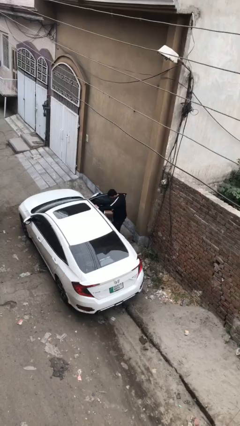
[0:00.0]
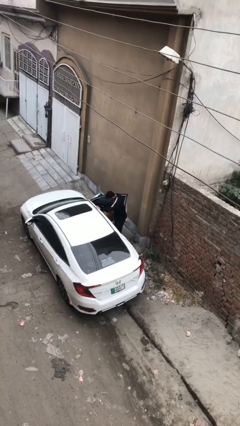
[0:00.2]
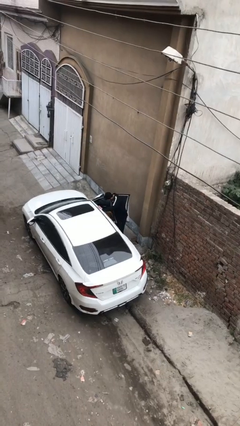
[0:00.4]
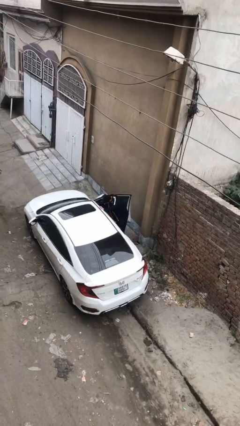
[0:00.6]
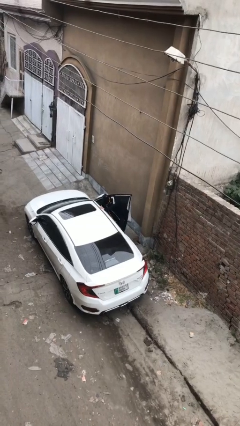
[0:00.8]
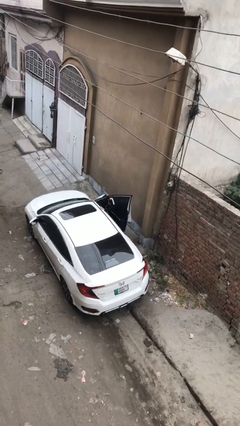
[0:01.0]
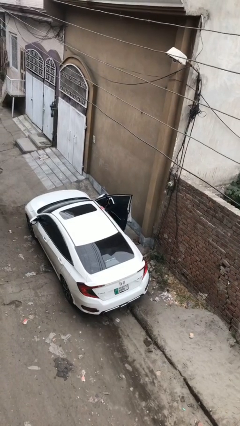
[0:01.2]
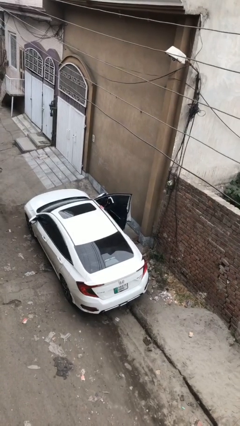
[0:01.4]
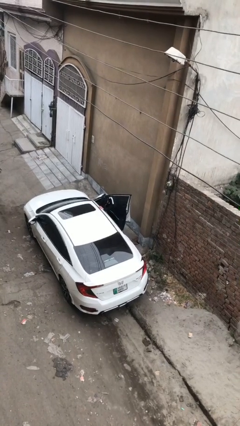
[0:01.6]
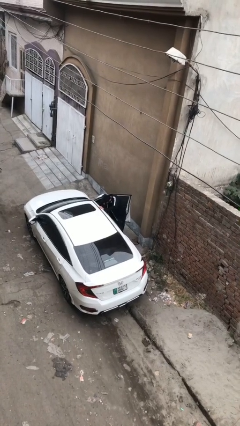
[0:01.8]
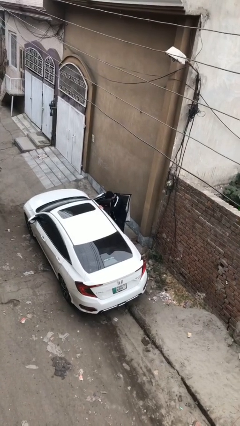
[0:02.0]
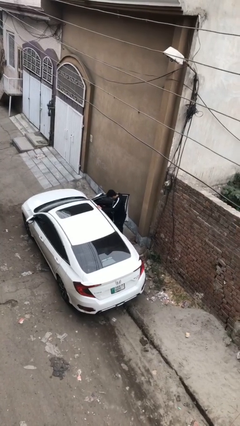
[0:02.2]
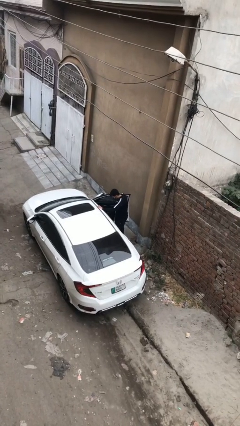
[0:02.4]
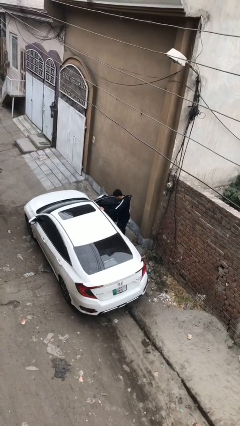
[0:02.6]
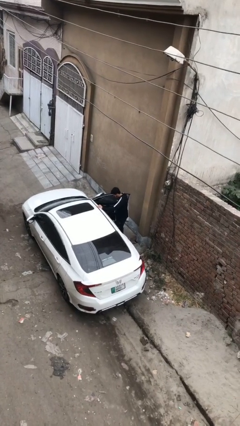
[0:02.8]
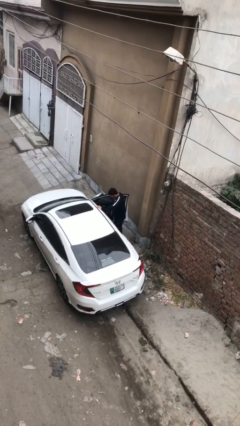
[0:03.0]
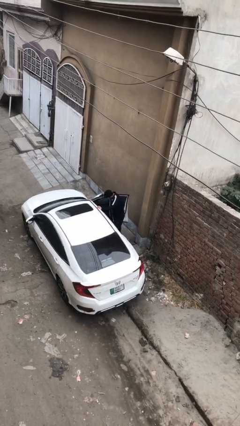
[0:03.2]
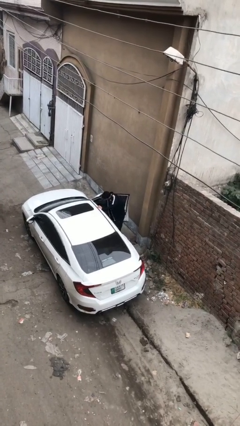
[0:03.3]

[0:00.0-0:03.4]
person loads car

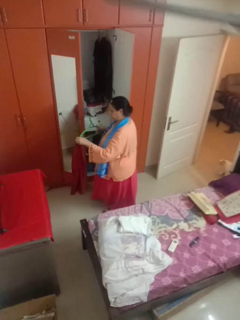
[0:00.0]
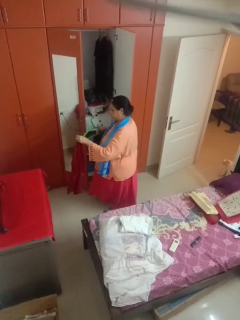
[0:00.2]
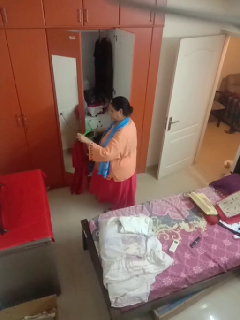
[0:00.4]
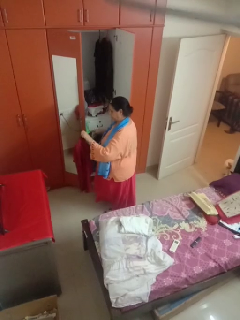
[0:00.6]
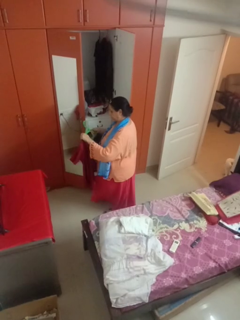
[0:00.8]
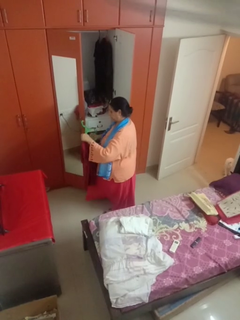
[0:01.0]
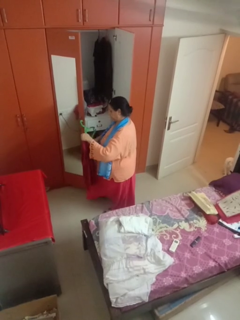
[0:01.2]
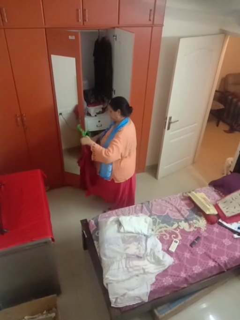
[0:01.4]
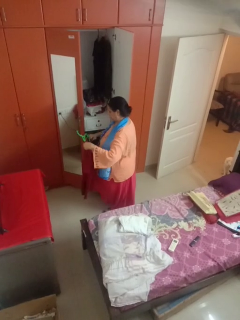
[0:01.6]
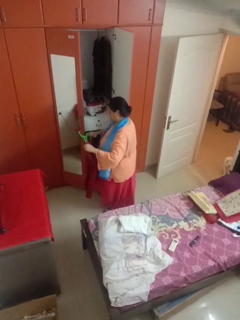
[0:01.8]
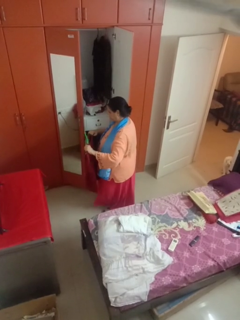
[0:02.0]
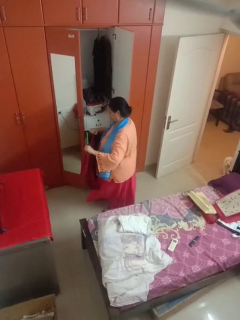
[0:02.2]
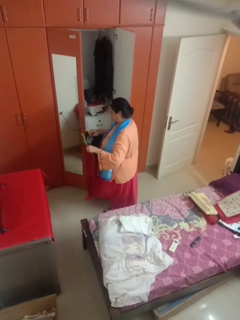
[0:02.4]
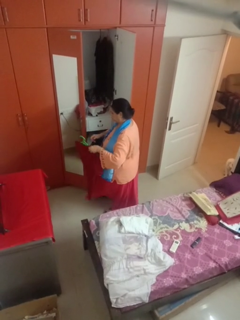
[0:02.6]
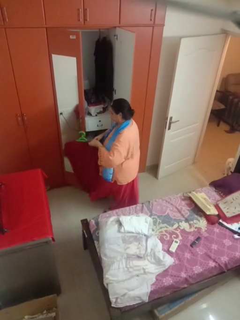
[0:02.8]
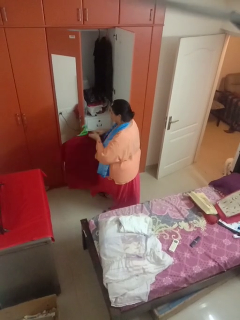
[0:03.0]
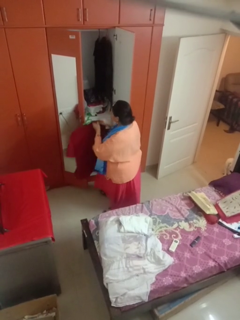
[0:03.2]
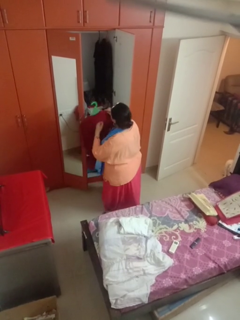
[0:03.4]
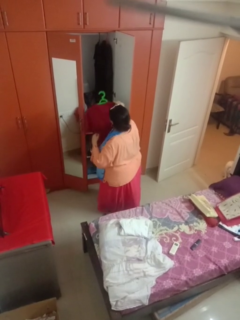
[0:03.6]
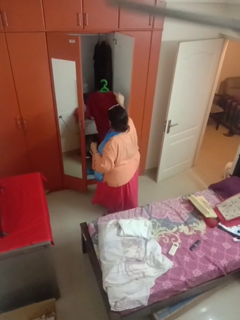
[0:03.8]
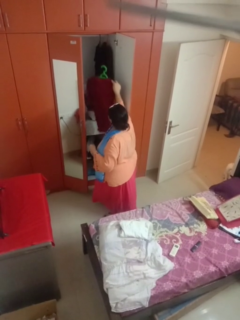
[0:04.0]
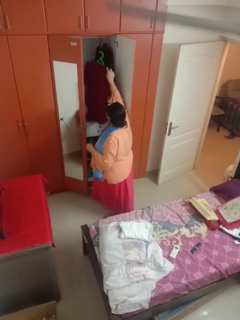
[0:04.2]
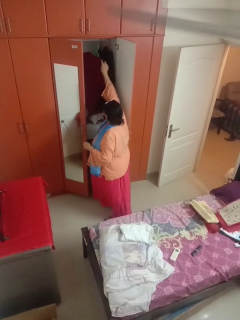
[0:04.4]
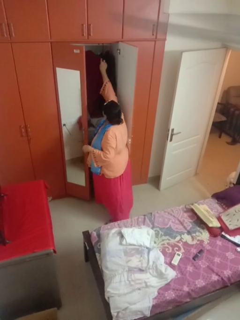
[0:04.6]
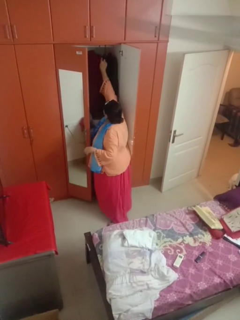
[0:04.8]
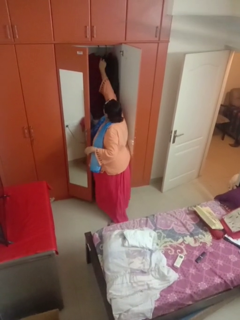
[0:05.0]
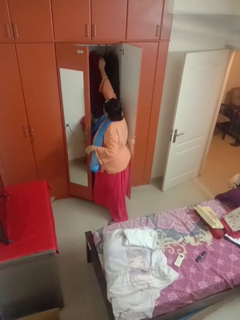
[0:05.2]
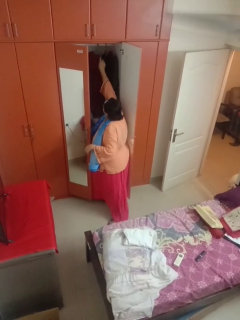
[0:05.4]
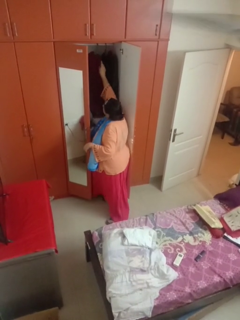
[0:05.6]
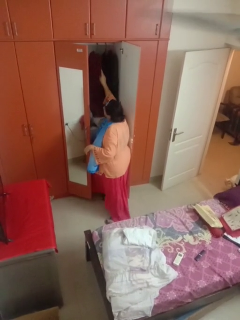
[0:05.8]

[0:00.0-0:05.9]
person puts clothes into closet

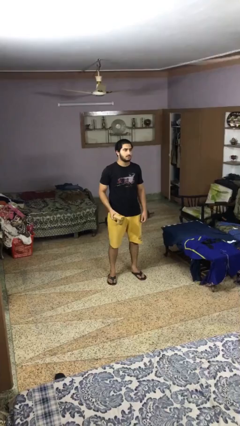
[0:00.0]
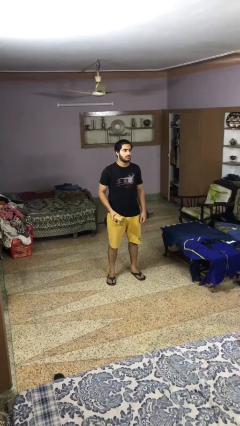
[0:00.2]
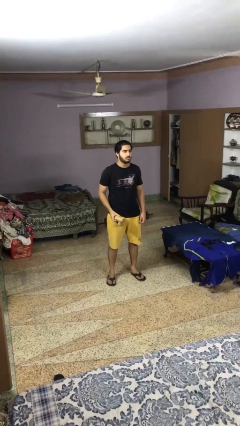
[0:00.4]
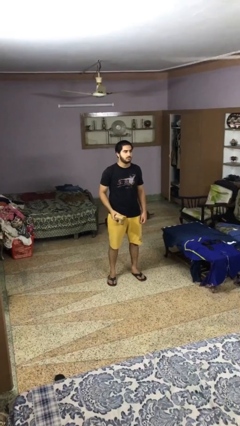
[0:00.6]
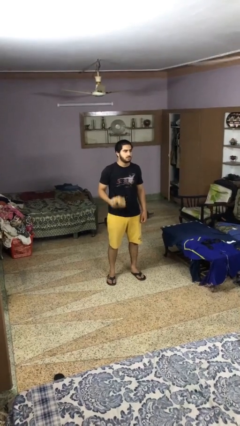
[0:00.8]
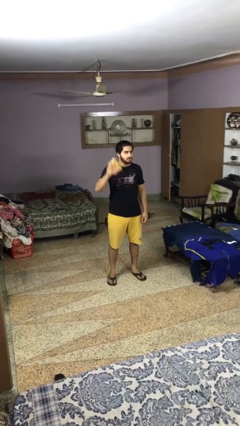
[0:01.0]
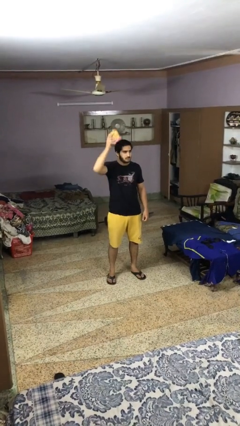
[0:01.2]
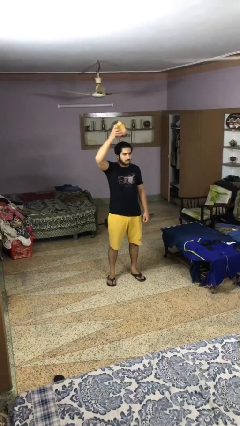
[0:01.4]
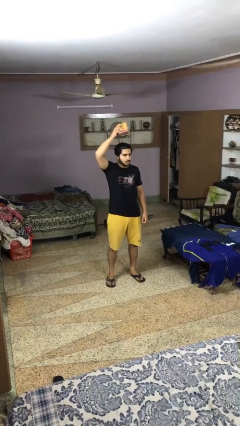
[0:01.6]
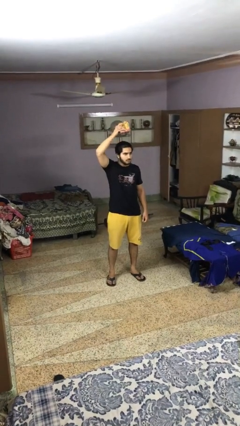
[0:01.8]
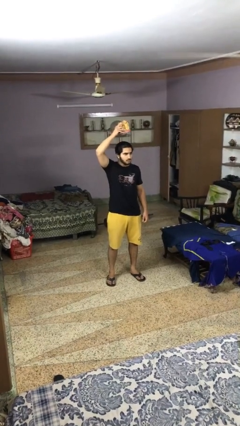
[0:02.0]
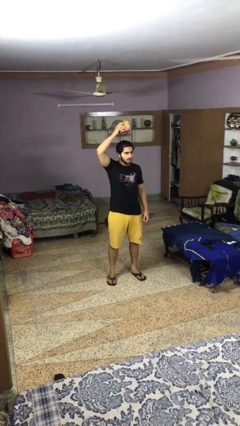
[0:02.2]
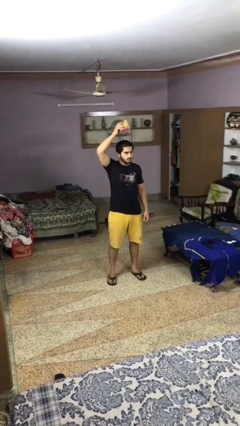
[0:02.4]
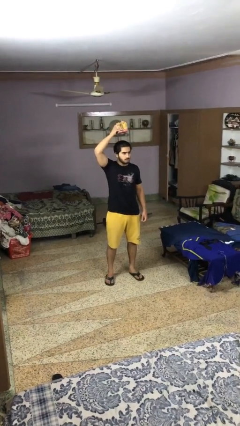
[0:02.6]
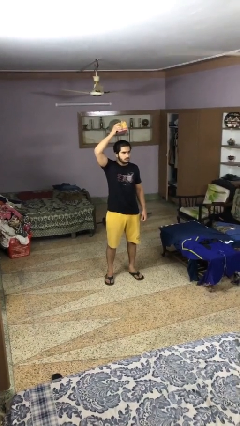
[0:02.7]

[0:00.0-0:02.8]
person holds object above head

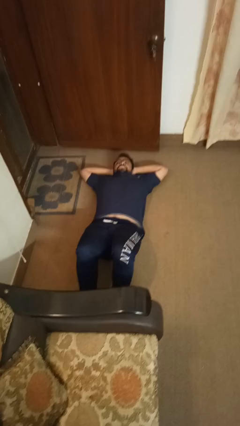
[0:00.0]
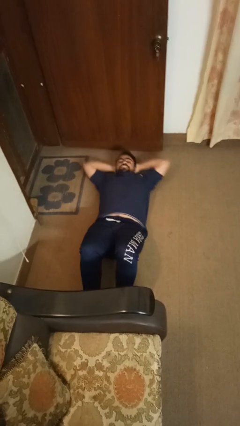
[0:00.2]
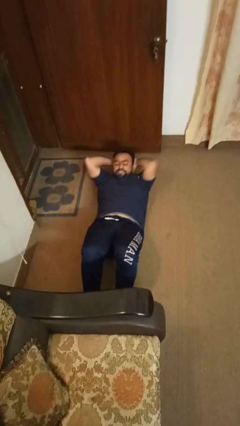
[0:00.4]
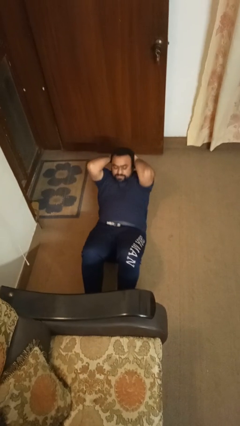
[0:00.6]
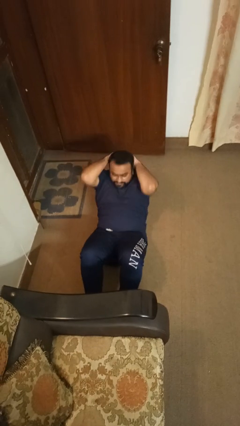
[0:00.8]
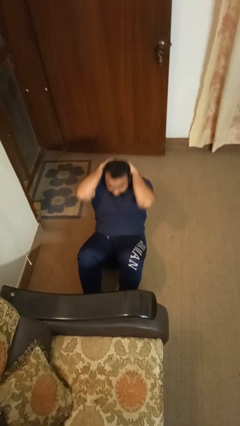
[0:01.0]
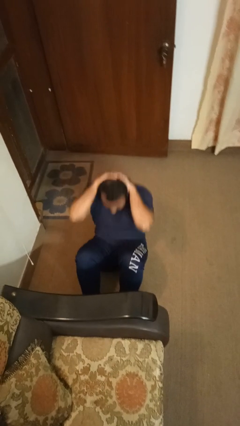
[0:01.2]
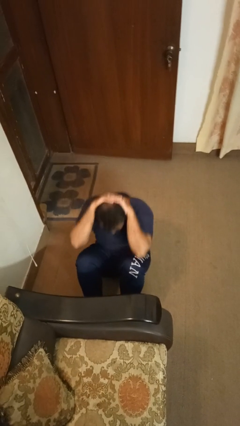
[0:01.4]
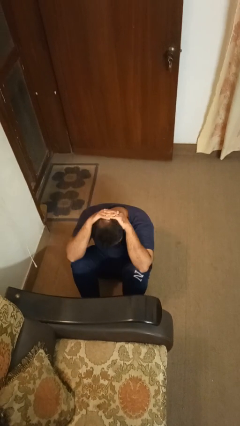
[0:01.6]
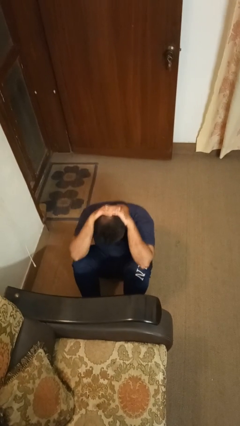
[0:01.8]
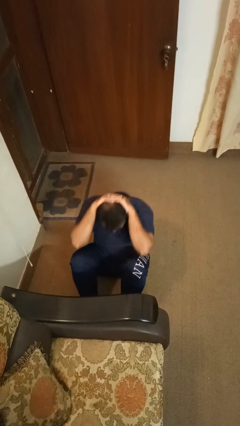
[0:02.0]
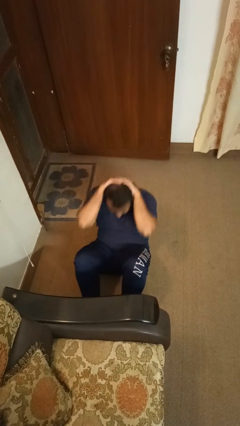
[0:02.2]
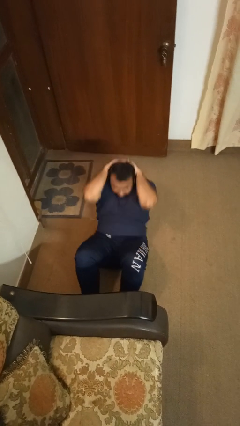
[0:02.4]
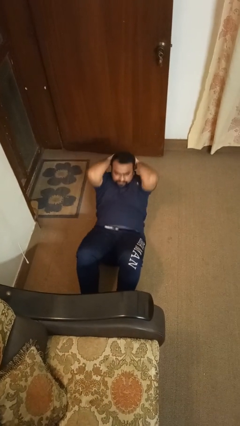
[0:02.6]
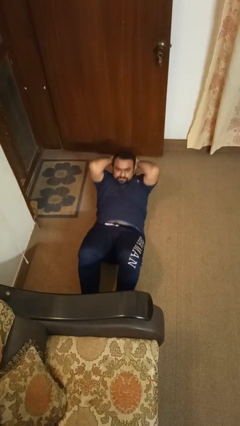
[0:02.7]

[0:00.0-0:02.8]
person exercises with situp

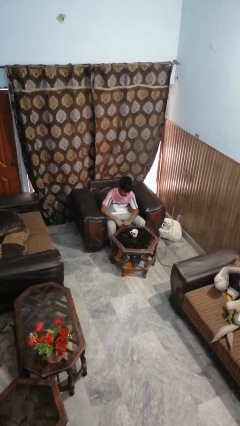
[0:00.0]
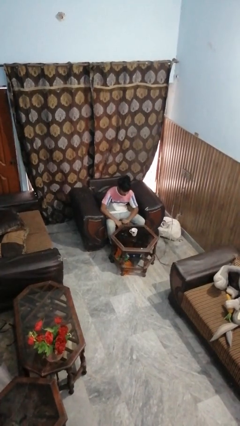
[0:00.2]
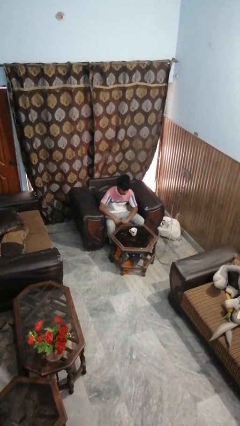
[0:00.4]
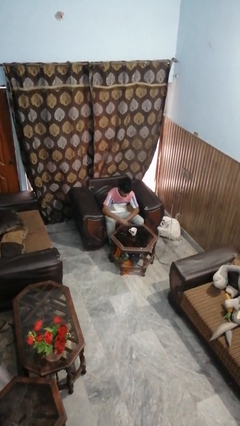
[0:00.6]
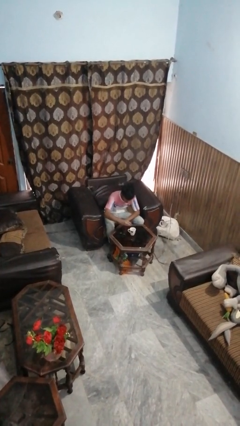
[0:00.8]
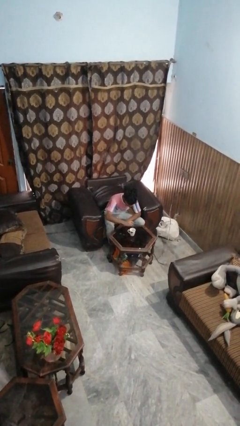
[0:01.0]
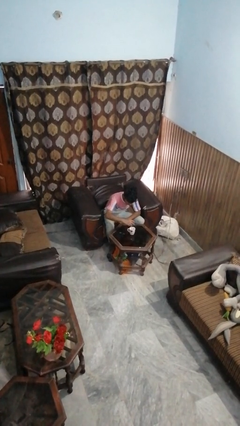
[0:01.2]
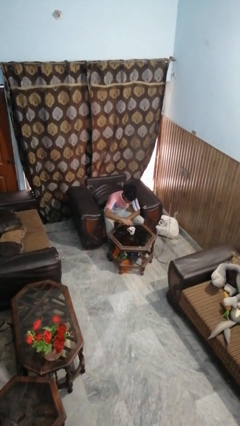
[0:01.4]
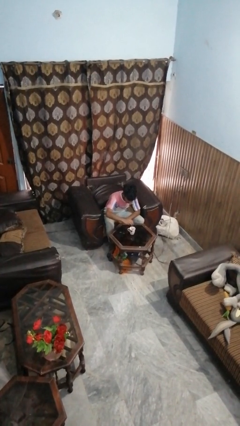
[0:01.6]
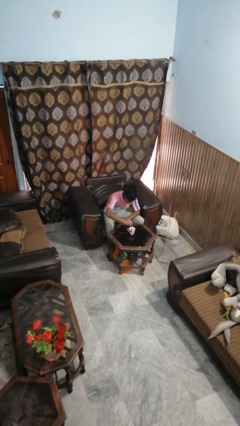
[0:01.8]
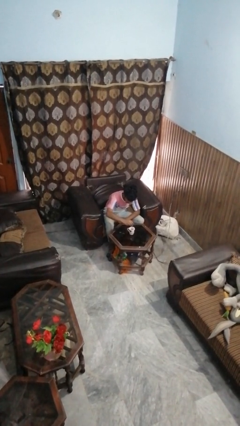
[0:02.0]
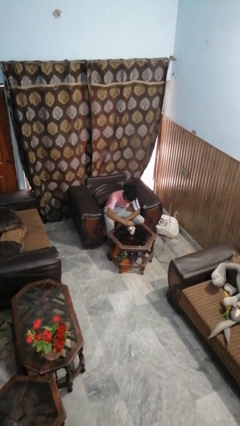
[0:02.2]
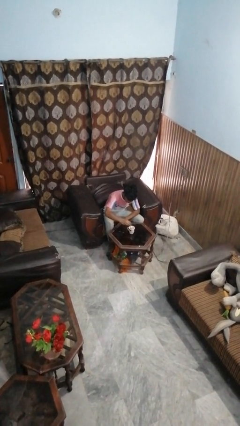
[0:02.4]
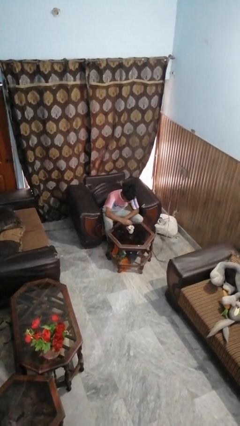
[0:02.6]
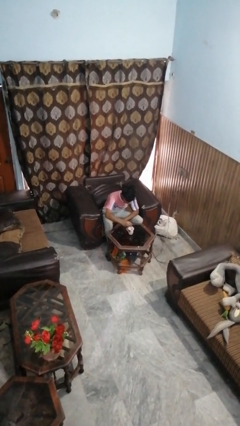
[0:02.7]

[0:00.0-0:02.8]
person stirs mug

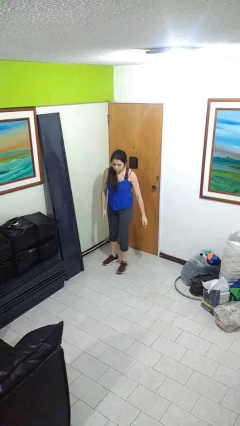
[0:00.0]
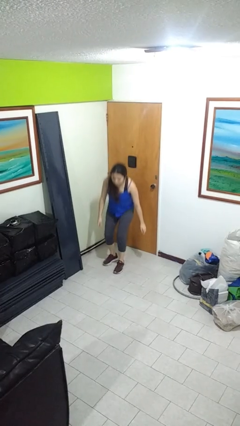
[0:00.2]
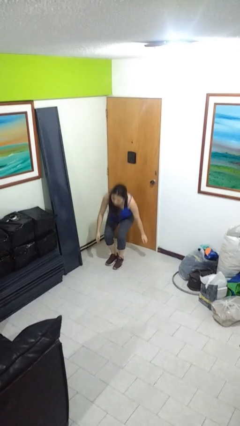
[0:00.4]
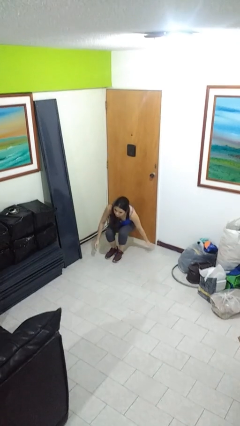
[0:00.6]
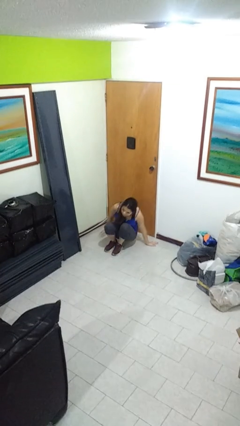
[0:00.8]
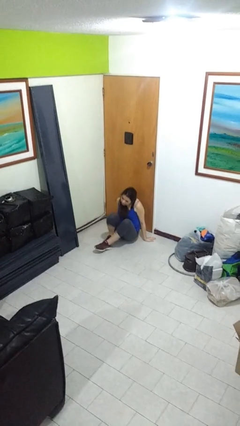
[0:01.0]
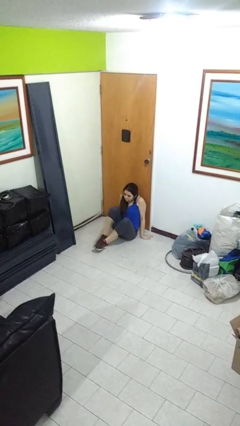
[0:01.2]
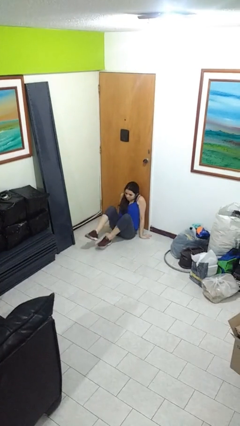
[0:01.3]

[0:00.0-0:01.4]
person sits crisscross
